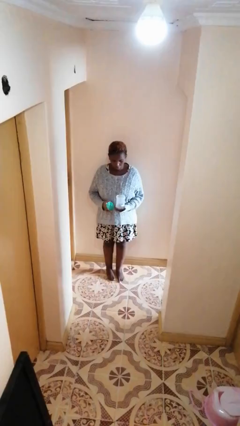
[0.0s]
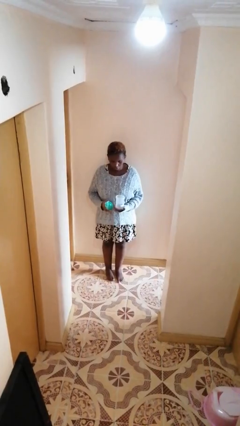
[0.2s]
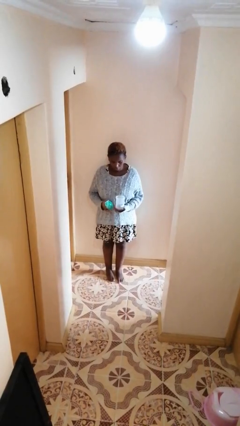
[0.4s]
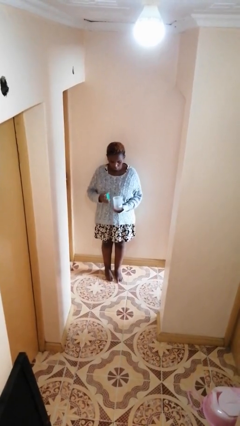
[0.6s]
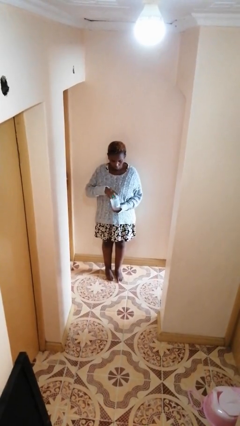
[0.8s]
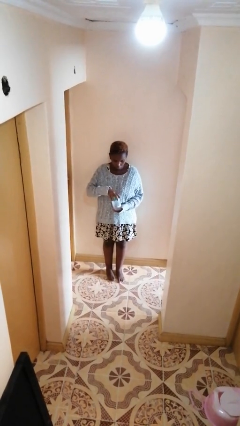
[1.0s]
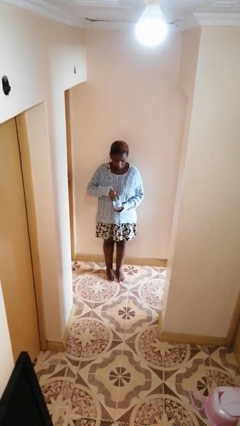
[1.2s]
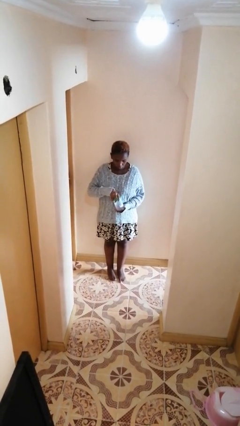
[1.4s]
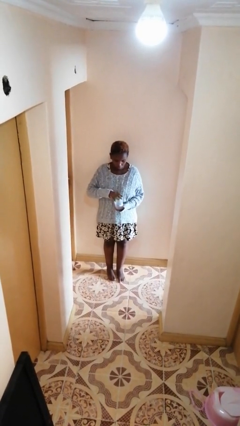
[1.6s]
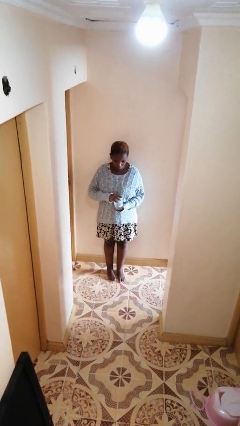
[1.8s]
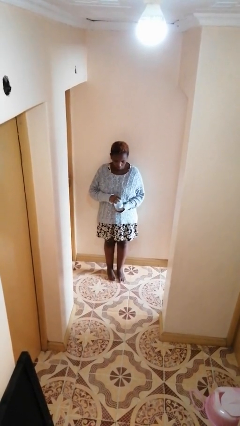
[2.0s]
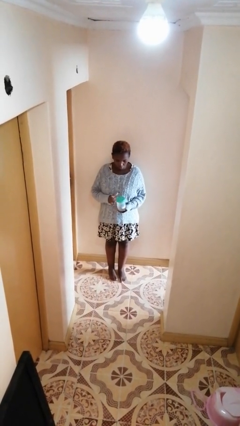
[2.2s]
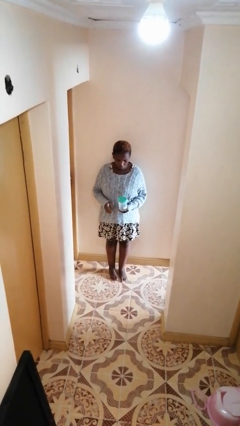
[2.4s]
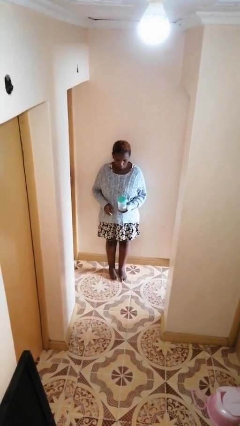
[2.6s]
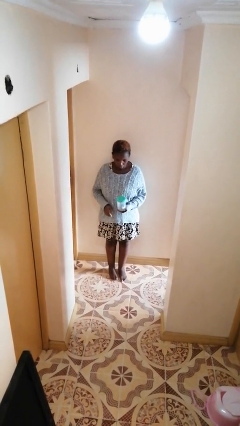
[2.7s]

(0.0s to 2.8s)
person closes jar

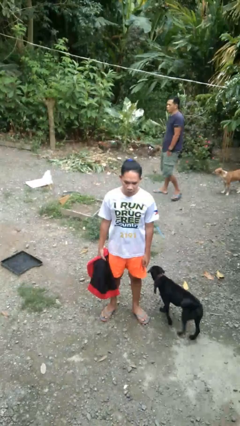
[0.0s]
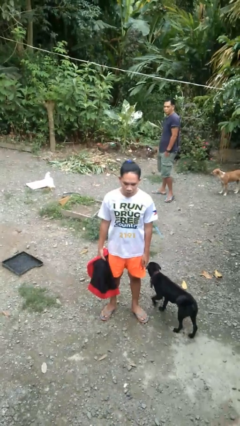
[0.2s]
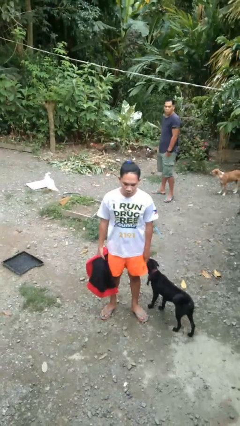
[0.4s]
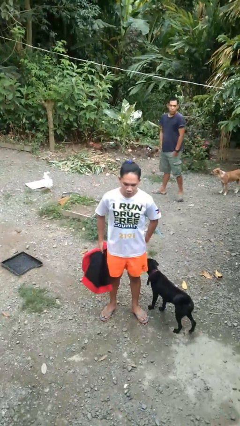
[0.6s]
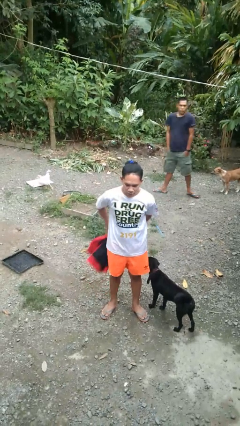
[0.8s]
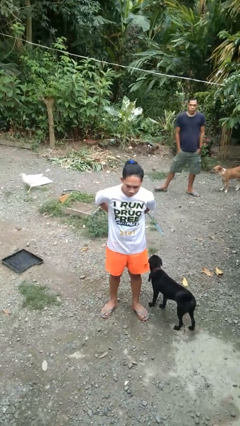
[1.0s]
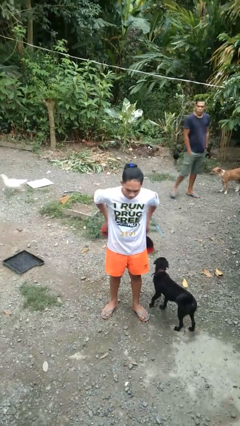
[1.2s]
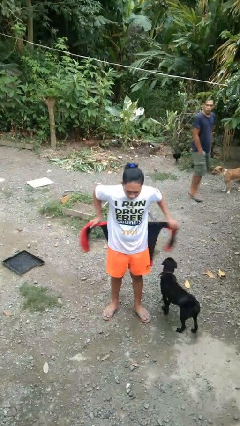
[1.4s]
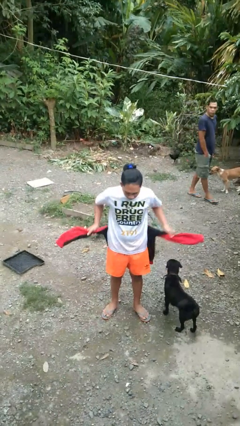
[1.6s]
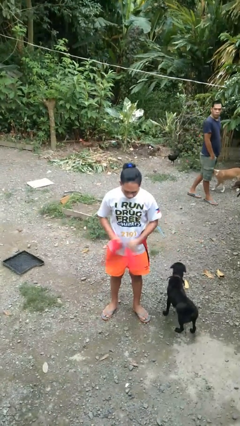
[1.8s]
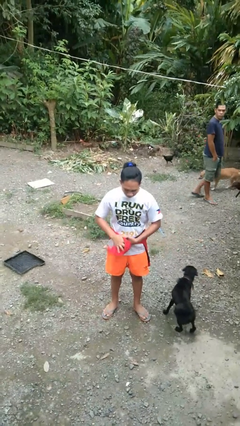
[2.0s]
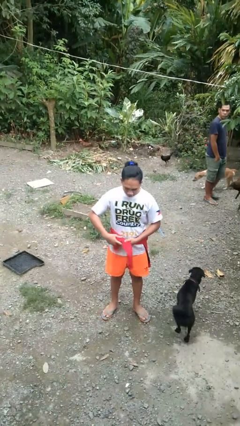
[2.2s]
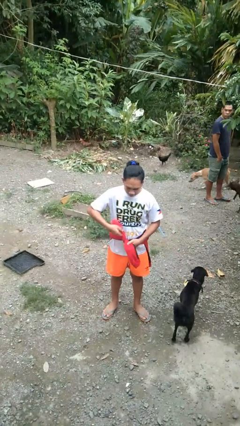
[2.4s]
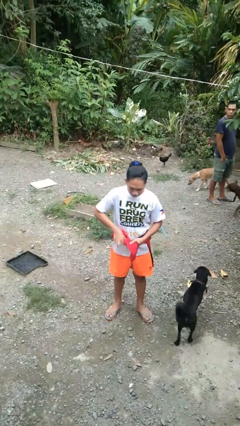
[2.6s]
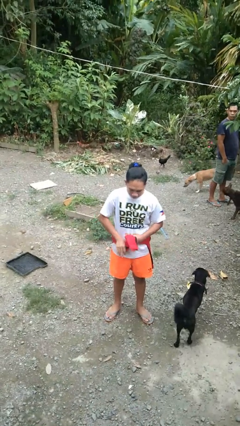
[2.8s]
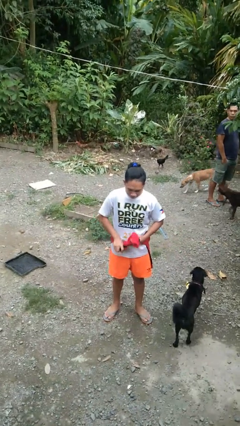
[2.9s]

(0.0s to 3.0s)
person ties jacket around waist

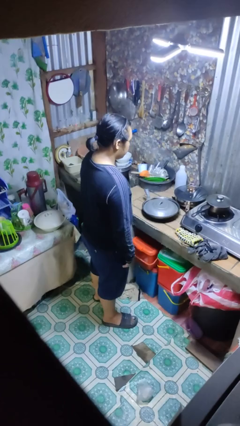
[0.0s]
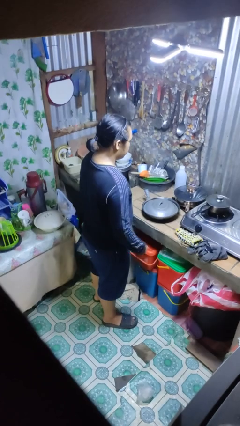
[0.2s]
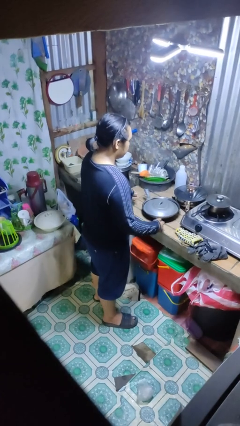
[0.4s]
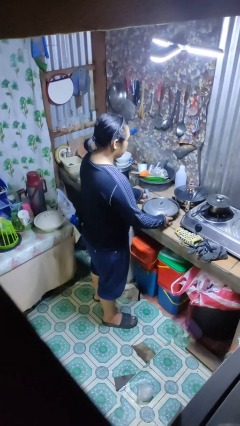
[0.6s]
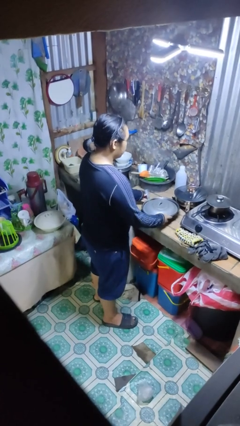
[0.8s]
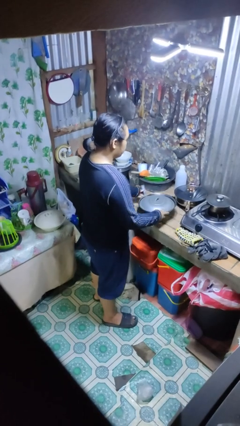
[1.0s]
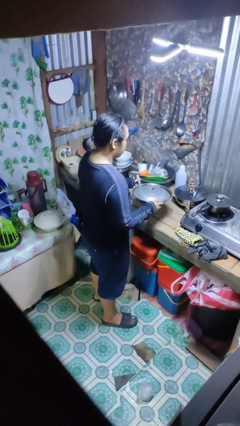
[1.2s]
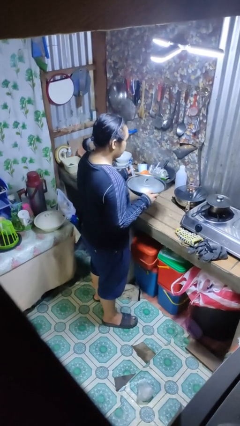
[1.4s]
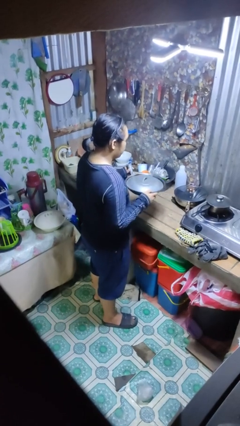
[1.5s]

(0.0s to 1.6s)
person picks up object from countertop

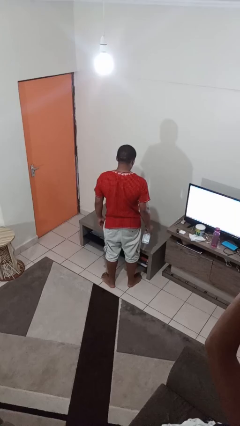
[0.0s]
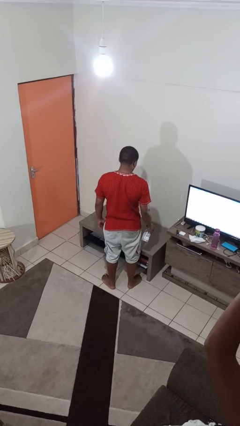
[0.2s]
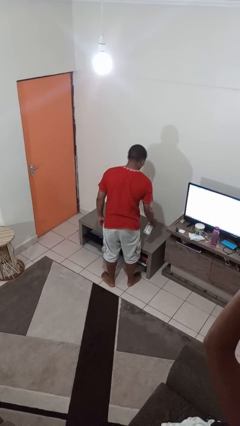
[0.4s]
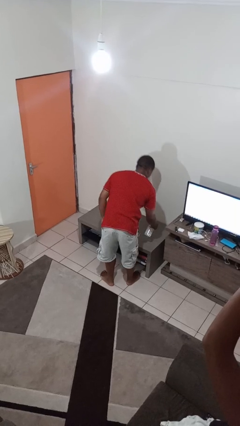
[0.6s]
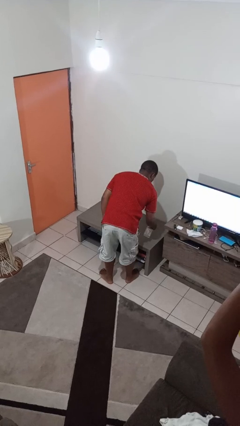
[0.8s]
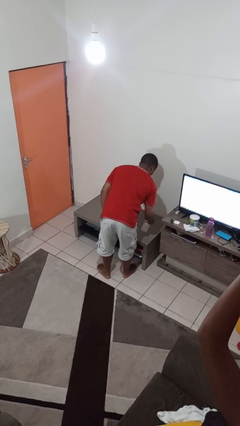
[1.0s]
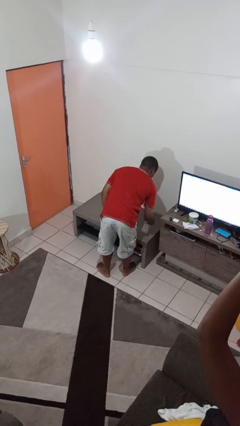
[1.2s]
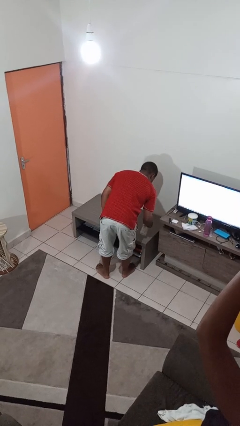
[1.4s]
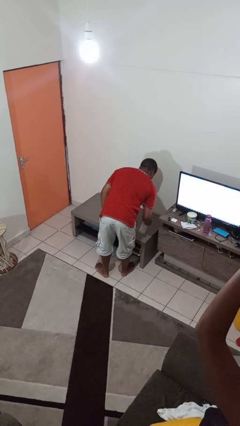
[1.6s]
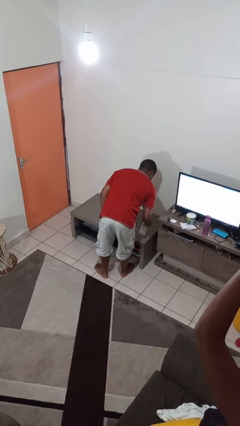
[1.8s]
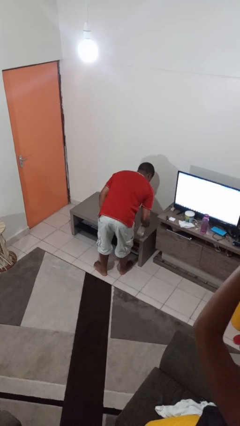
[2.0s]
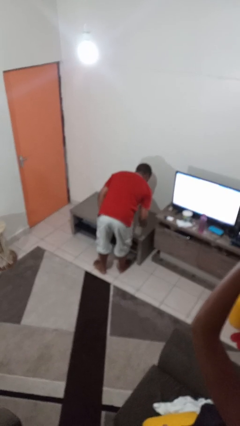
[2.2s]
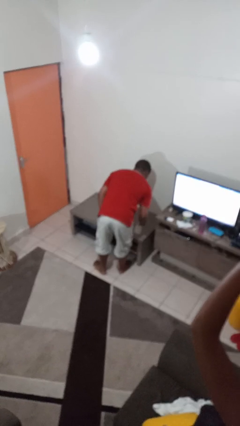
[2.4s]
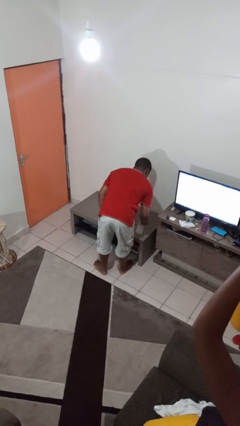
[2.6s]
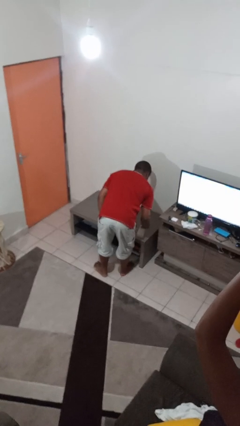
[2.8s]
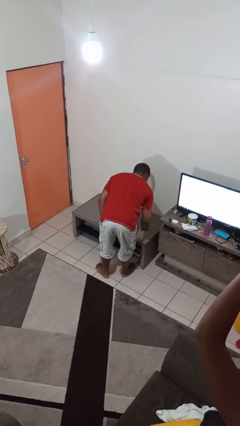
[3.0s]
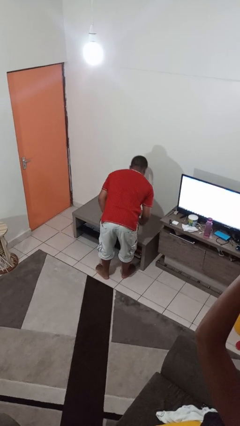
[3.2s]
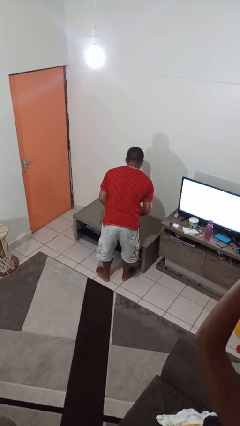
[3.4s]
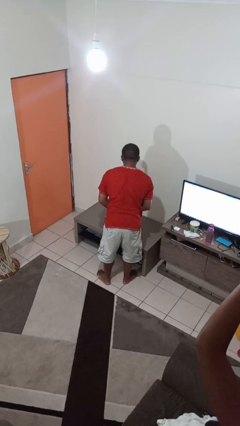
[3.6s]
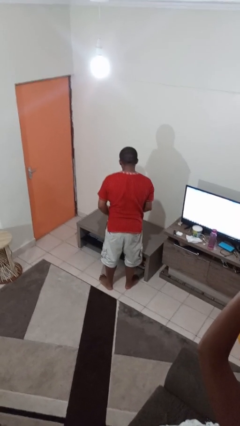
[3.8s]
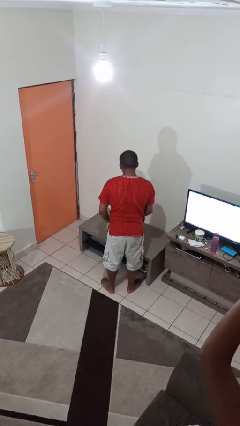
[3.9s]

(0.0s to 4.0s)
person sprays from bottle

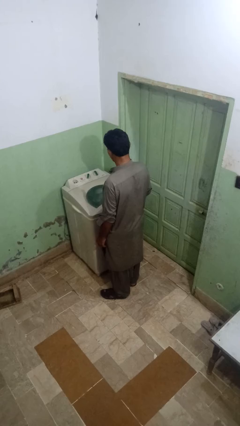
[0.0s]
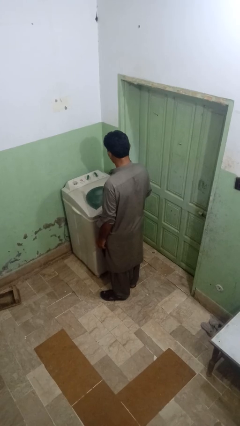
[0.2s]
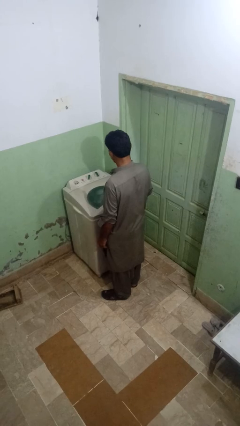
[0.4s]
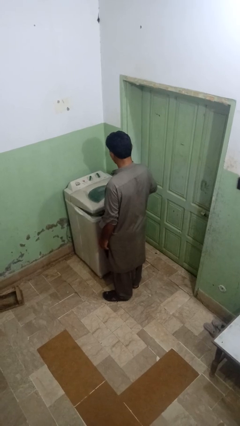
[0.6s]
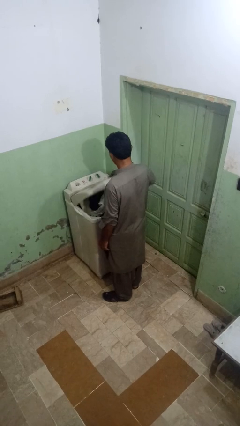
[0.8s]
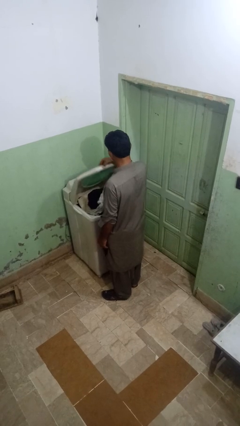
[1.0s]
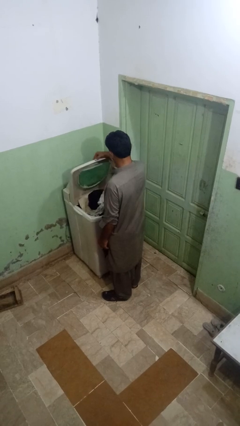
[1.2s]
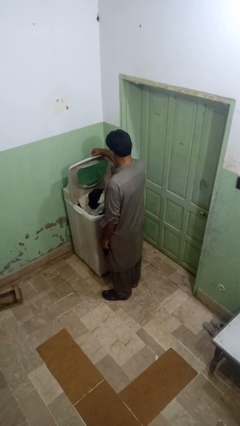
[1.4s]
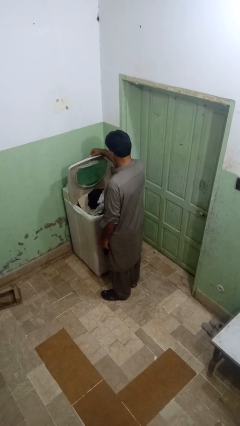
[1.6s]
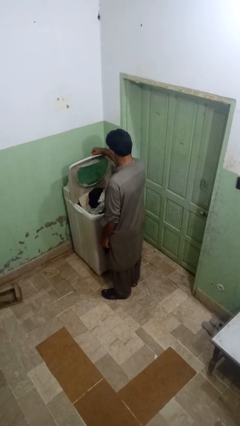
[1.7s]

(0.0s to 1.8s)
person opens clothes washer

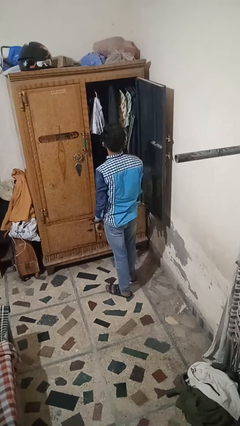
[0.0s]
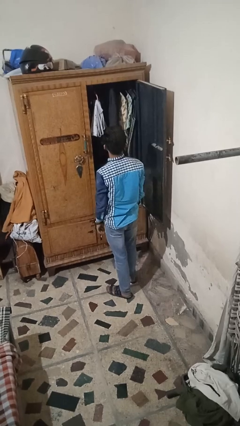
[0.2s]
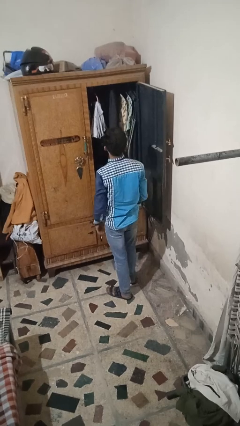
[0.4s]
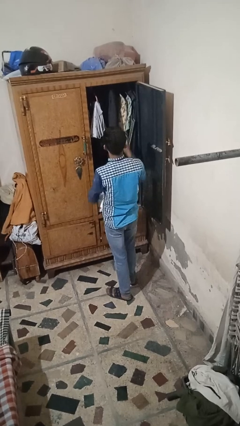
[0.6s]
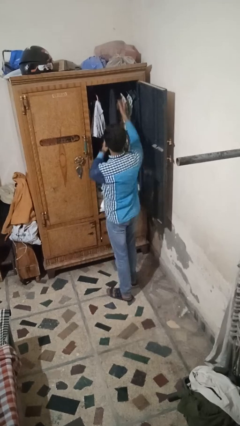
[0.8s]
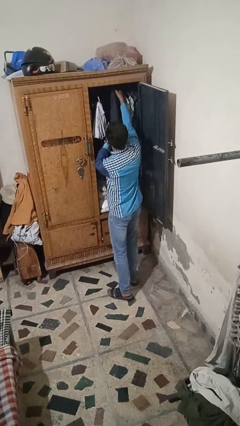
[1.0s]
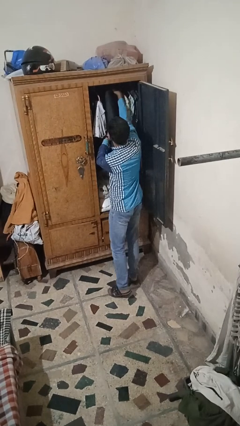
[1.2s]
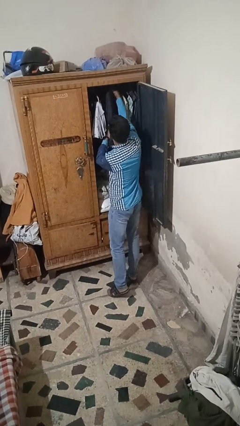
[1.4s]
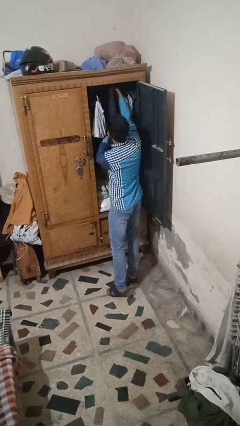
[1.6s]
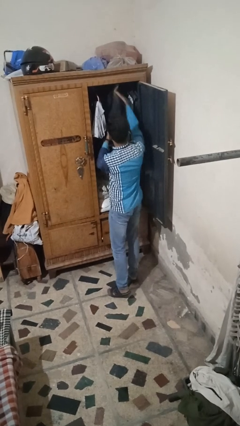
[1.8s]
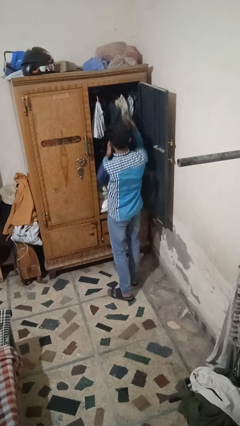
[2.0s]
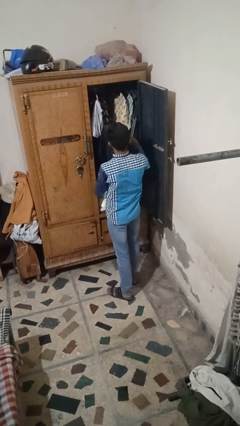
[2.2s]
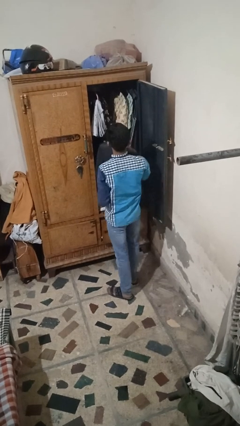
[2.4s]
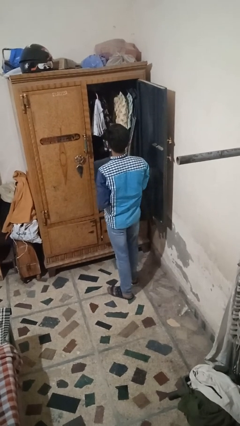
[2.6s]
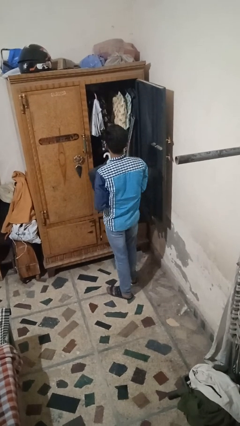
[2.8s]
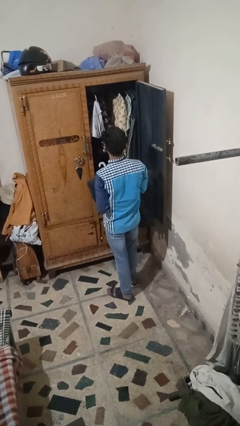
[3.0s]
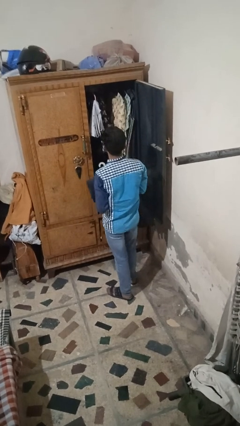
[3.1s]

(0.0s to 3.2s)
person takes clothes from closet

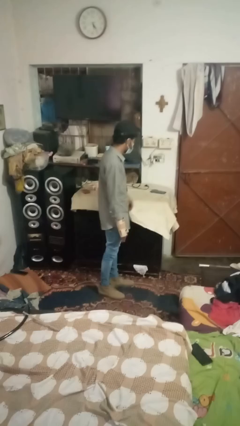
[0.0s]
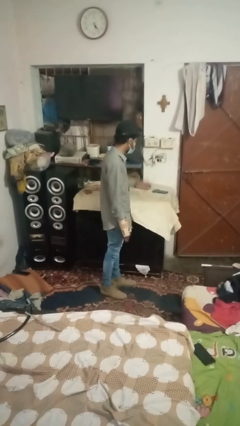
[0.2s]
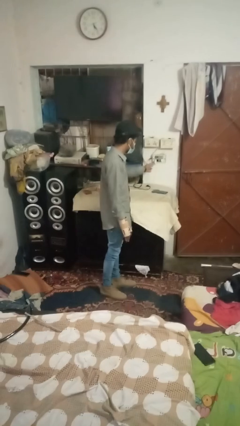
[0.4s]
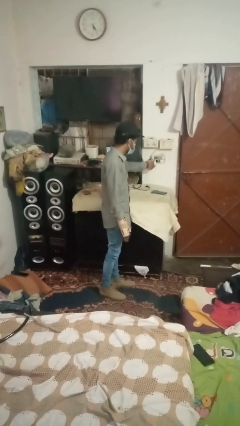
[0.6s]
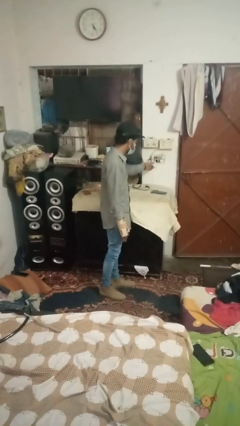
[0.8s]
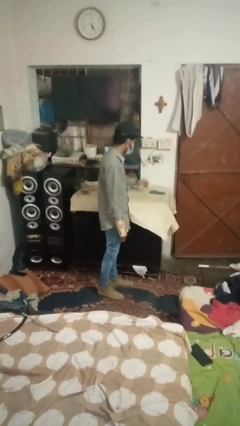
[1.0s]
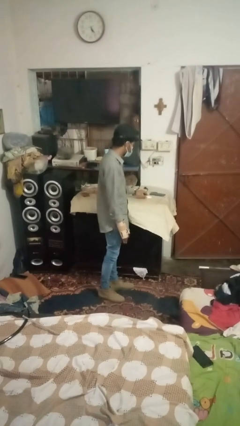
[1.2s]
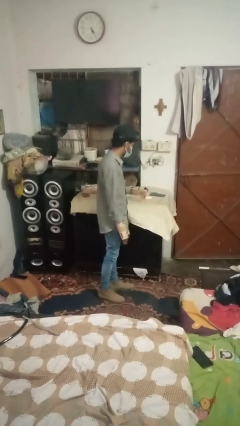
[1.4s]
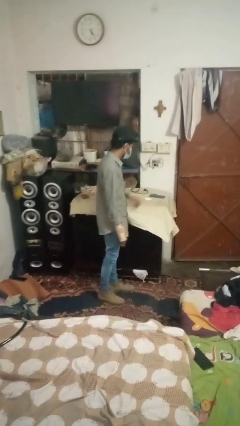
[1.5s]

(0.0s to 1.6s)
person unplugs from electrical socket
